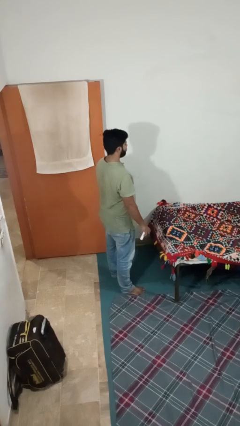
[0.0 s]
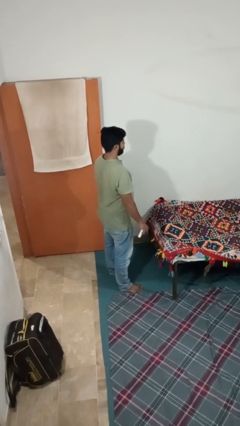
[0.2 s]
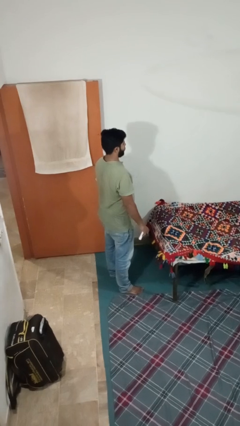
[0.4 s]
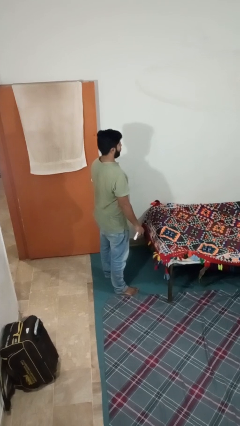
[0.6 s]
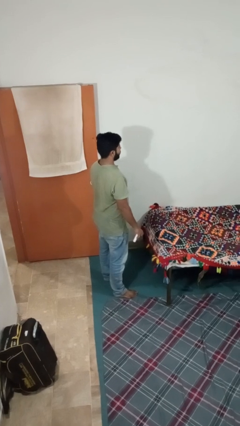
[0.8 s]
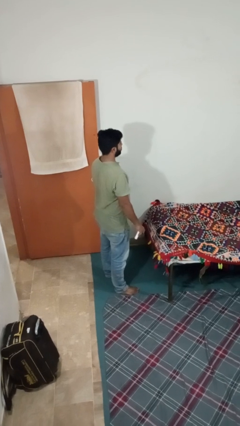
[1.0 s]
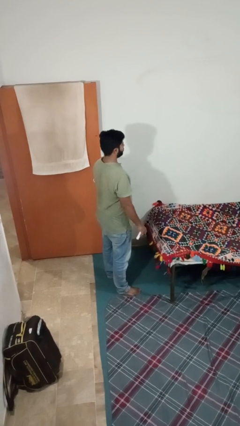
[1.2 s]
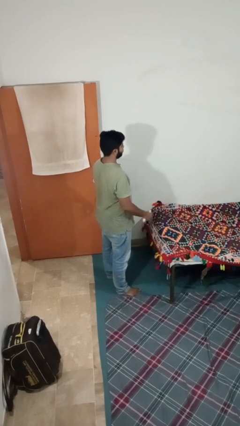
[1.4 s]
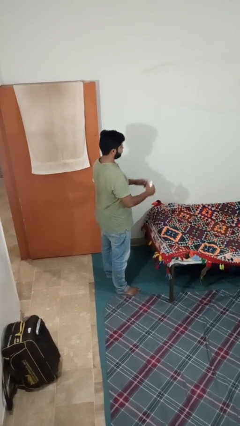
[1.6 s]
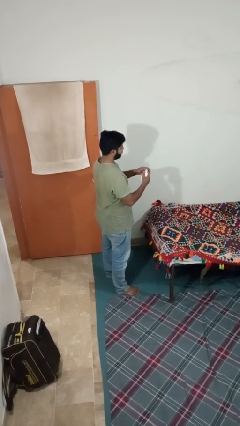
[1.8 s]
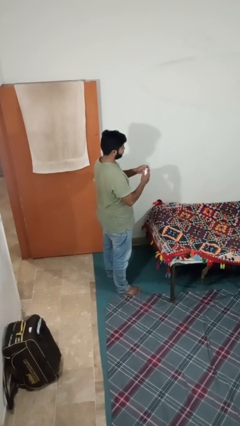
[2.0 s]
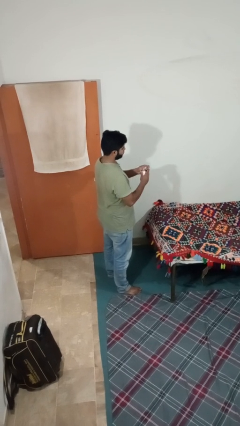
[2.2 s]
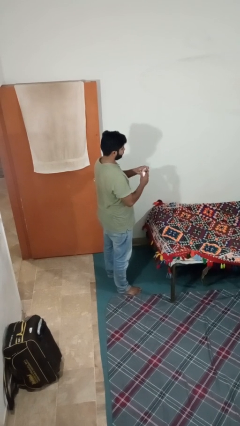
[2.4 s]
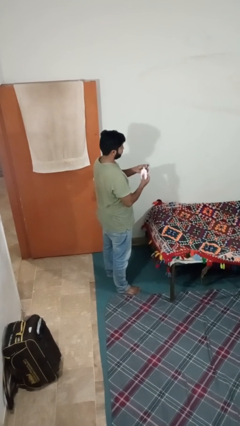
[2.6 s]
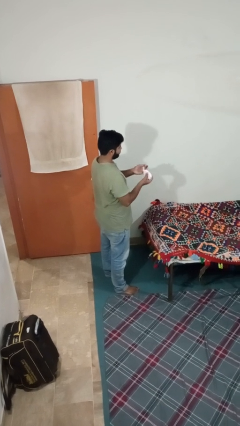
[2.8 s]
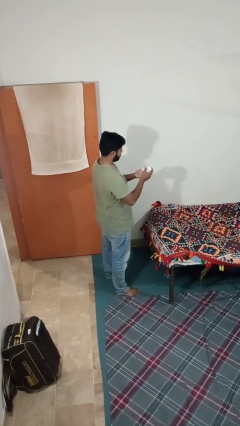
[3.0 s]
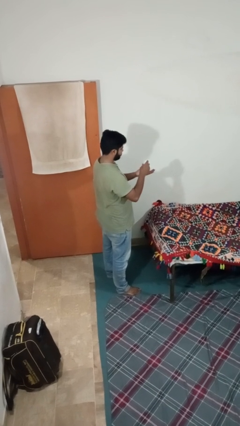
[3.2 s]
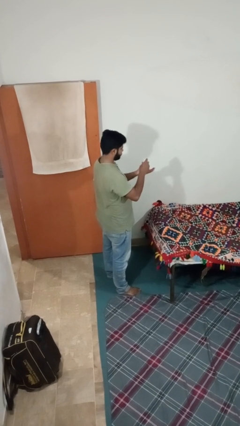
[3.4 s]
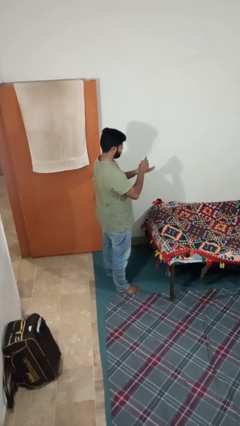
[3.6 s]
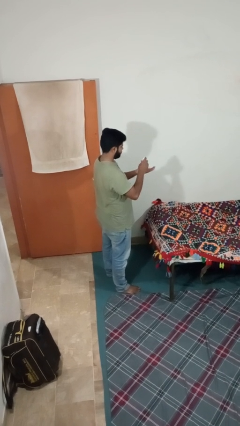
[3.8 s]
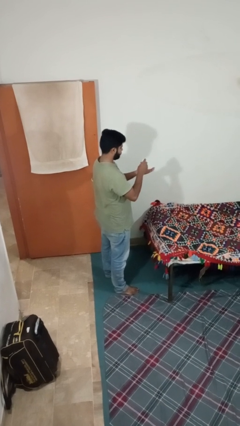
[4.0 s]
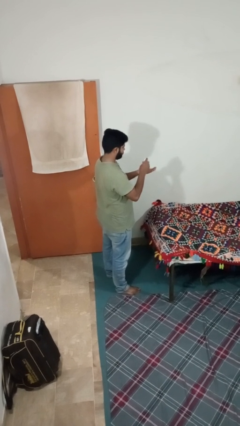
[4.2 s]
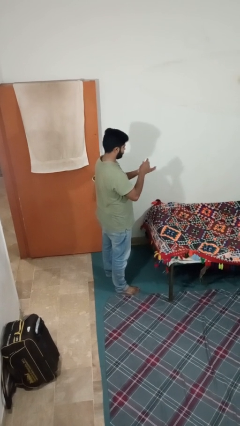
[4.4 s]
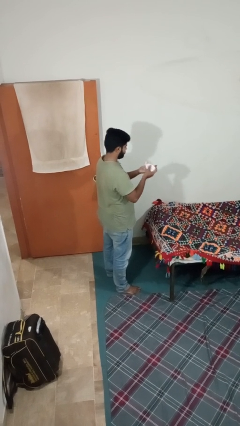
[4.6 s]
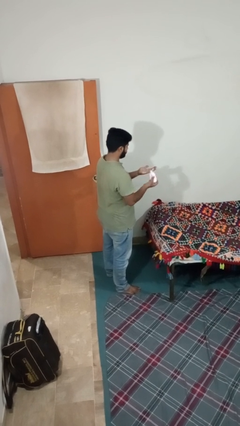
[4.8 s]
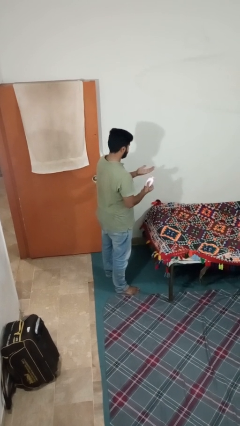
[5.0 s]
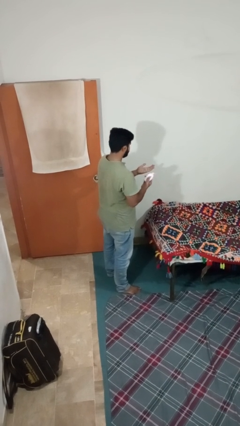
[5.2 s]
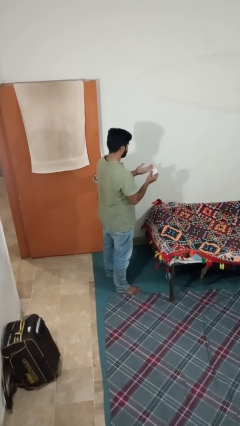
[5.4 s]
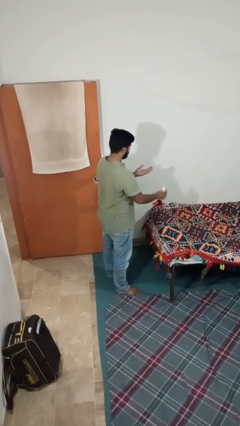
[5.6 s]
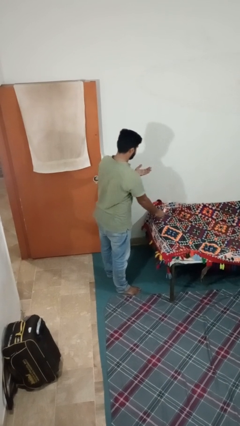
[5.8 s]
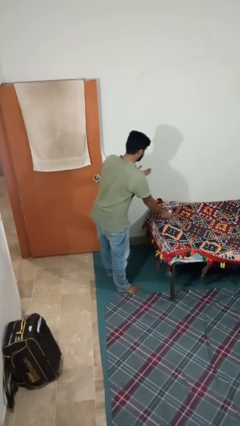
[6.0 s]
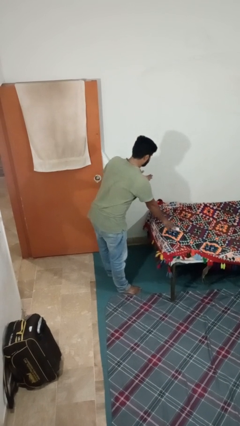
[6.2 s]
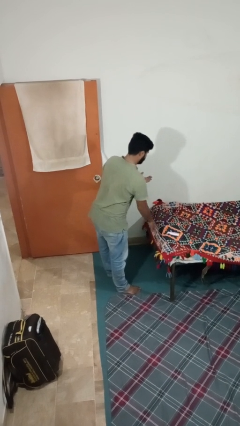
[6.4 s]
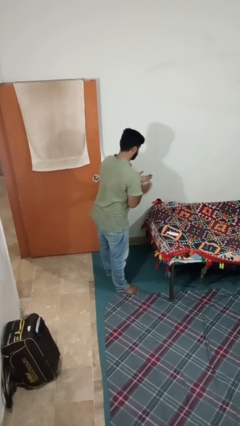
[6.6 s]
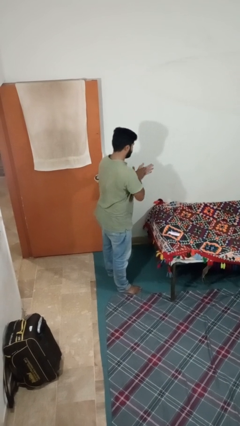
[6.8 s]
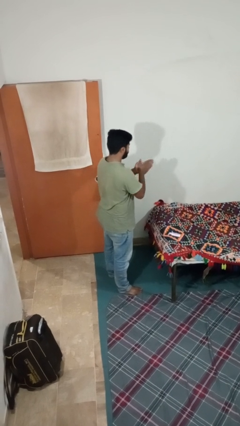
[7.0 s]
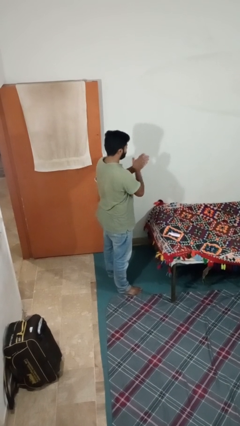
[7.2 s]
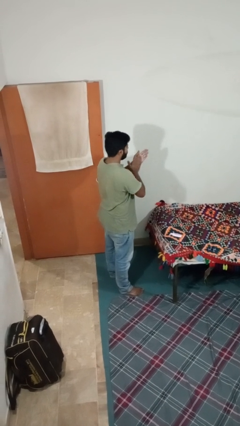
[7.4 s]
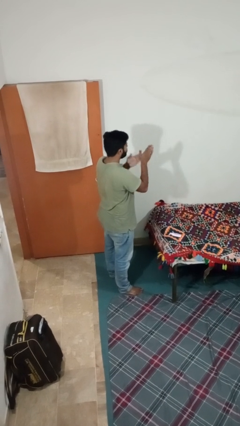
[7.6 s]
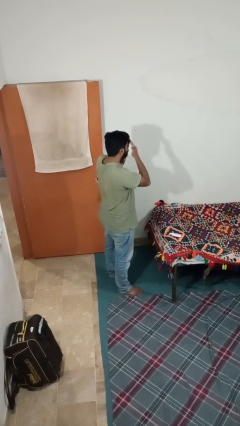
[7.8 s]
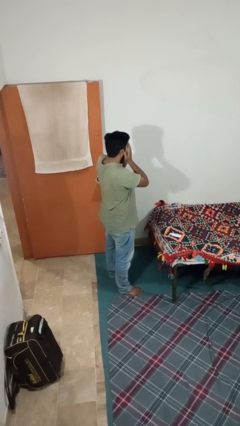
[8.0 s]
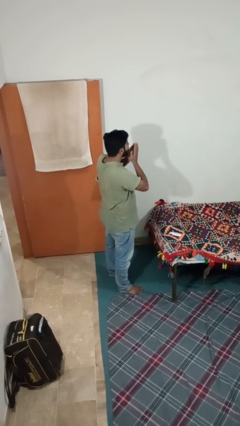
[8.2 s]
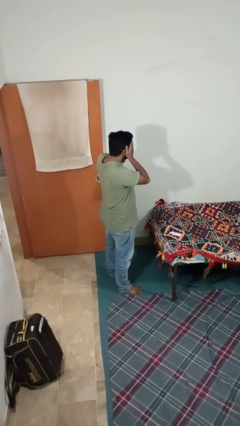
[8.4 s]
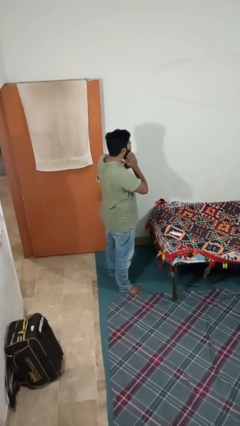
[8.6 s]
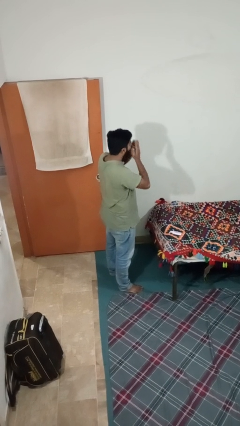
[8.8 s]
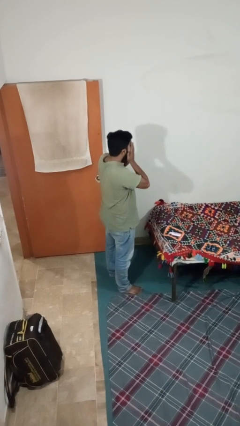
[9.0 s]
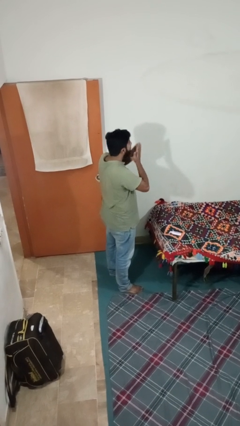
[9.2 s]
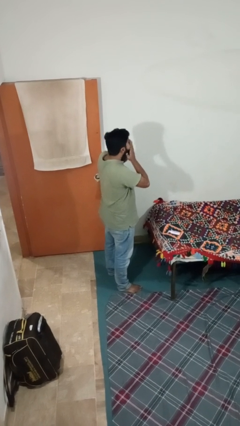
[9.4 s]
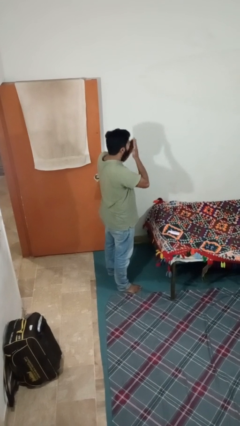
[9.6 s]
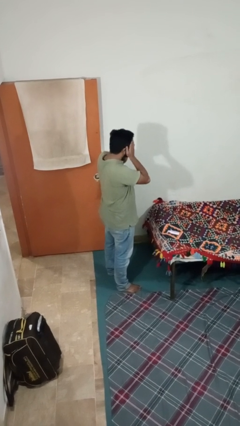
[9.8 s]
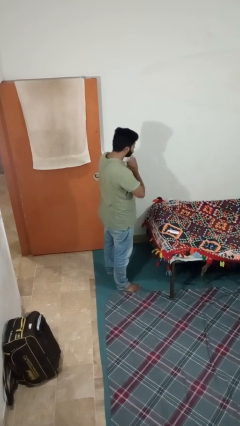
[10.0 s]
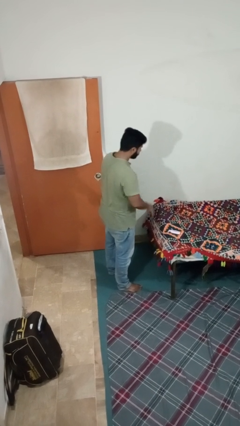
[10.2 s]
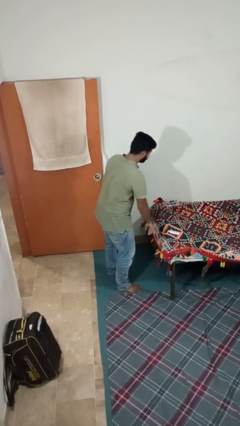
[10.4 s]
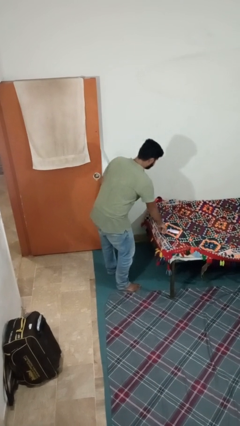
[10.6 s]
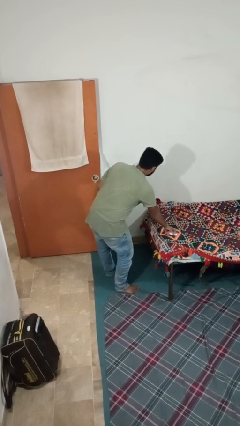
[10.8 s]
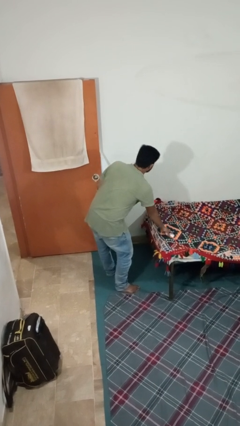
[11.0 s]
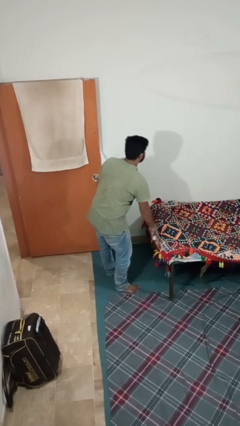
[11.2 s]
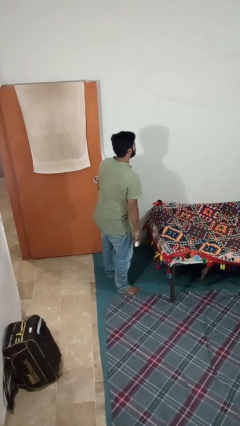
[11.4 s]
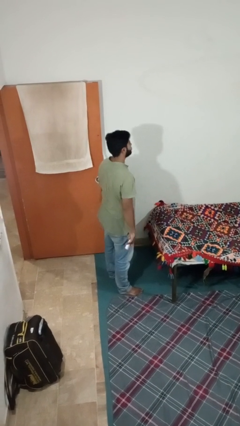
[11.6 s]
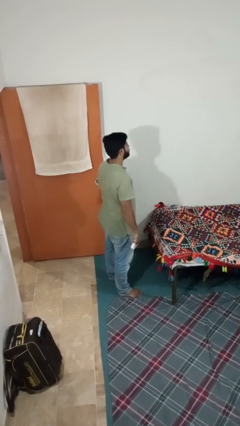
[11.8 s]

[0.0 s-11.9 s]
person applies facial moisturizer

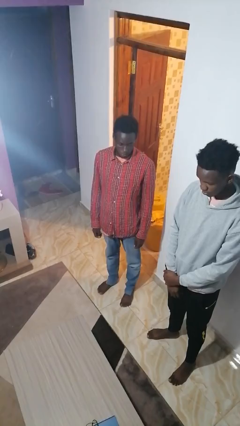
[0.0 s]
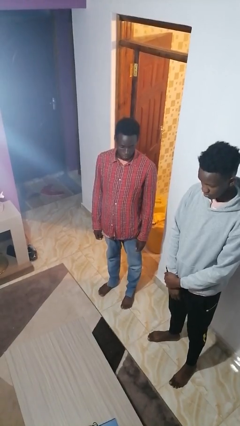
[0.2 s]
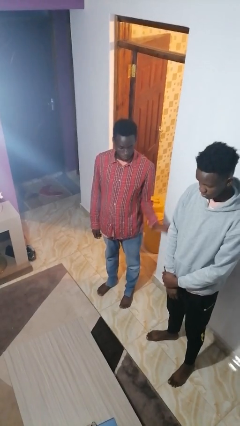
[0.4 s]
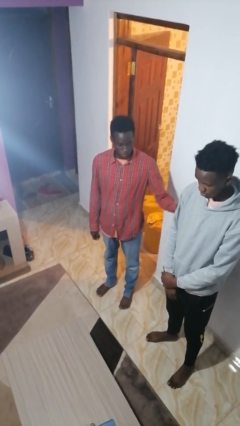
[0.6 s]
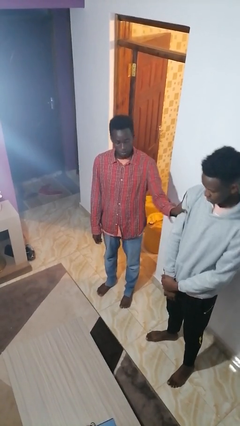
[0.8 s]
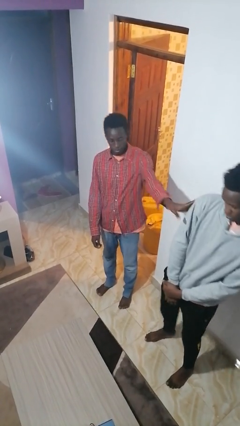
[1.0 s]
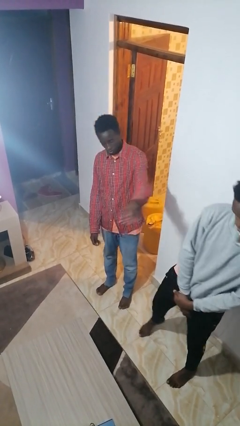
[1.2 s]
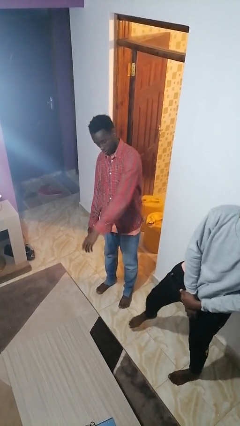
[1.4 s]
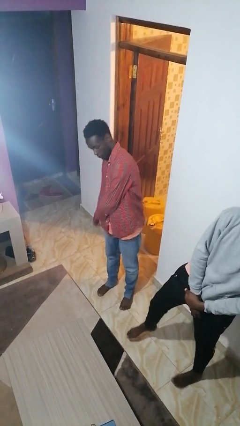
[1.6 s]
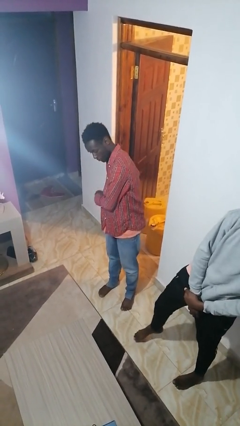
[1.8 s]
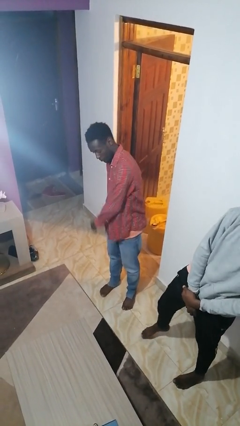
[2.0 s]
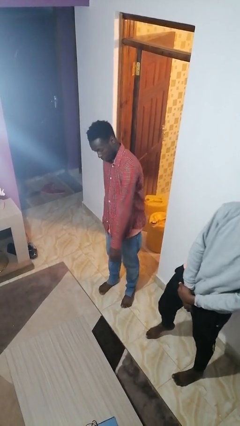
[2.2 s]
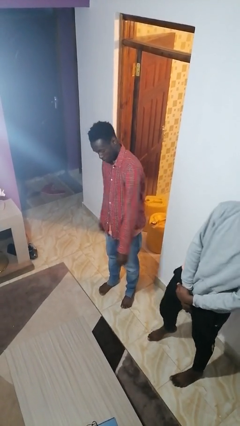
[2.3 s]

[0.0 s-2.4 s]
person shoves person

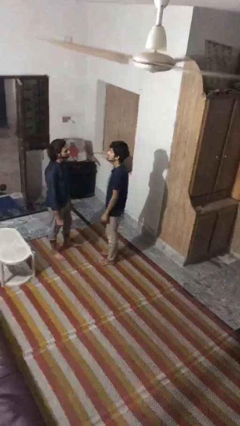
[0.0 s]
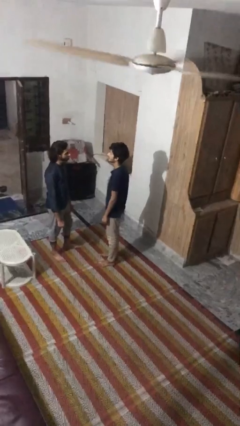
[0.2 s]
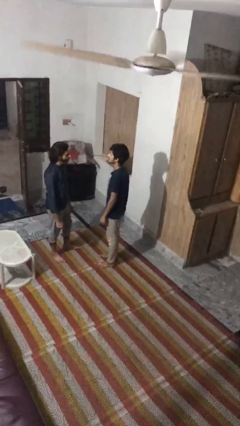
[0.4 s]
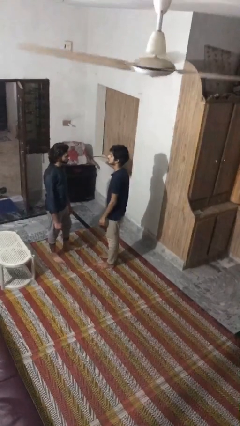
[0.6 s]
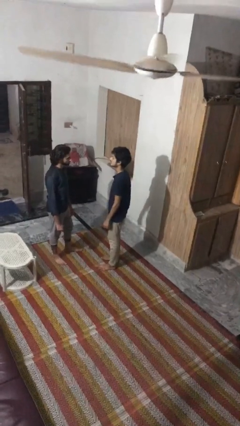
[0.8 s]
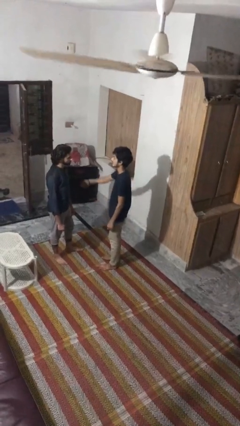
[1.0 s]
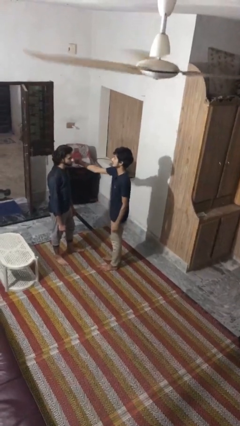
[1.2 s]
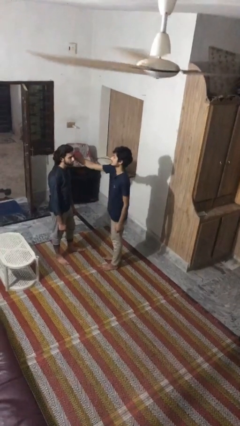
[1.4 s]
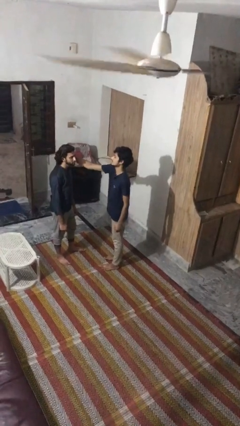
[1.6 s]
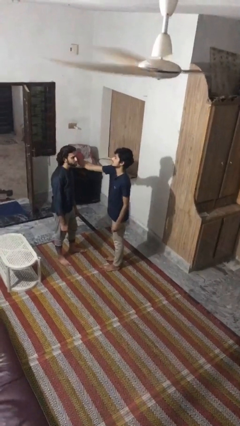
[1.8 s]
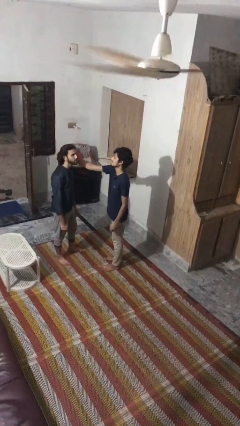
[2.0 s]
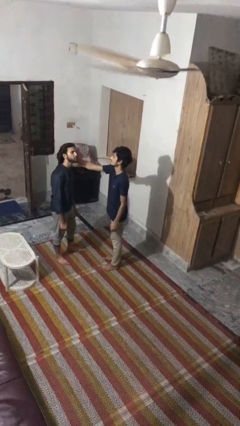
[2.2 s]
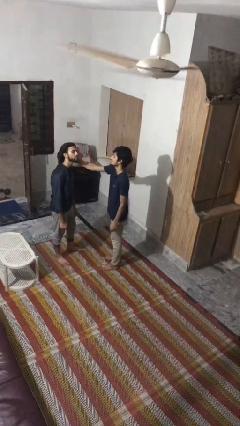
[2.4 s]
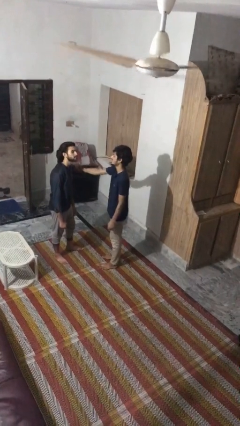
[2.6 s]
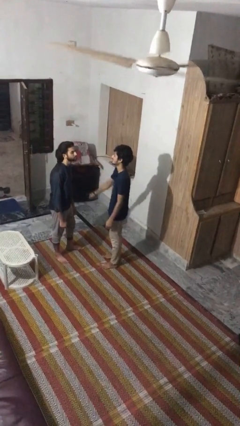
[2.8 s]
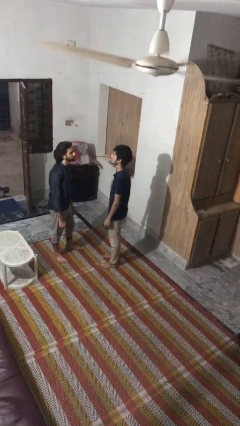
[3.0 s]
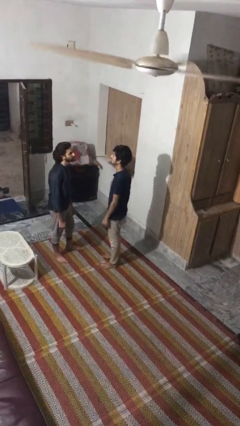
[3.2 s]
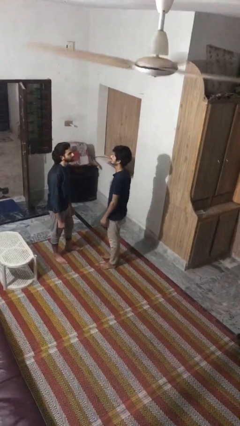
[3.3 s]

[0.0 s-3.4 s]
person grabs person by hair

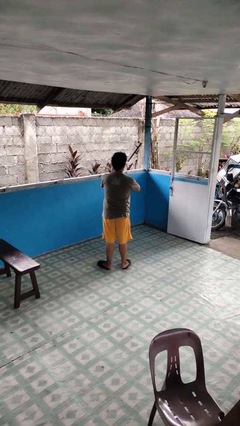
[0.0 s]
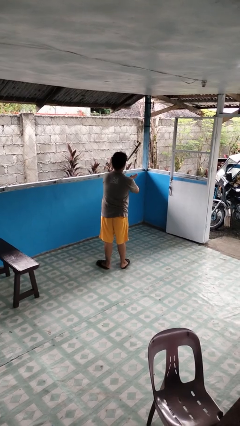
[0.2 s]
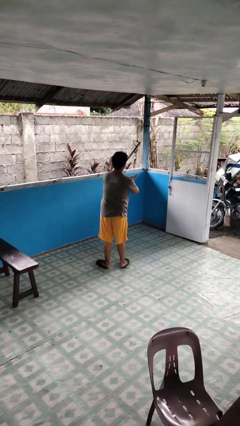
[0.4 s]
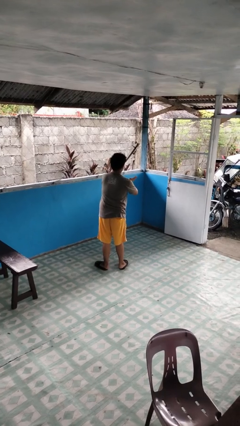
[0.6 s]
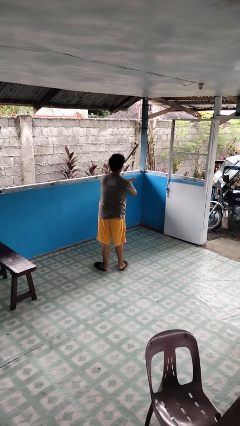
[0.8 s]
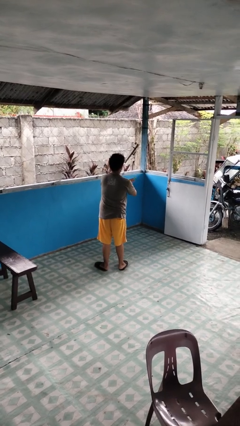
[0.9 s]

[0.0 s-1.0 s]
person gestures arms x
